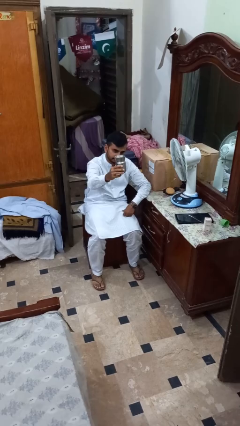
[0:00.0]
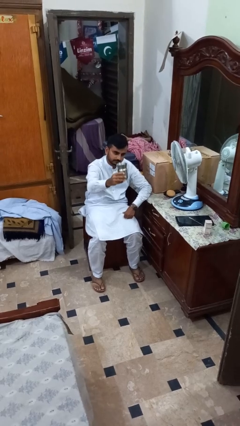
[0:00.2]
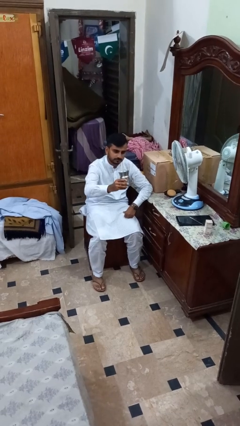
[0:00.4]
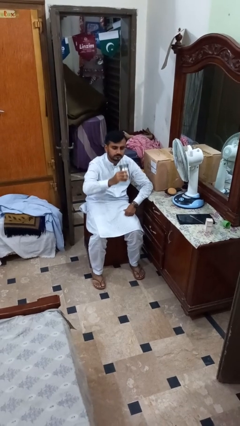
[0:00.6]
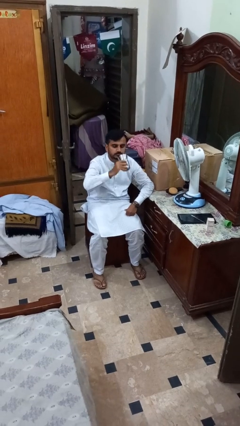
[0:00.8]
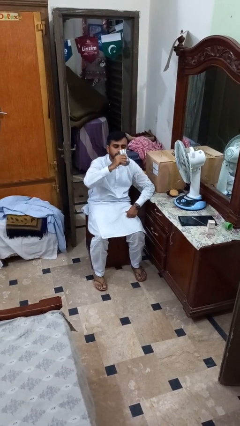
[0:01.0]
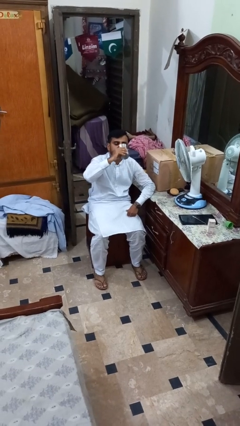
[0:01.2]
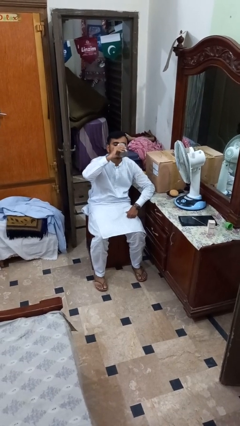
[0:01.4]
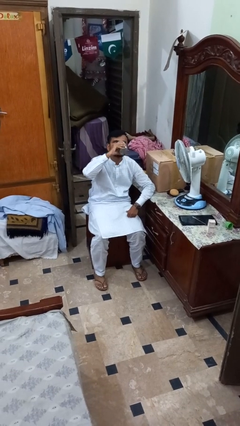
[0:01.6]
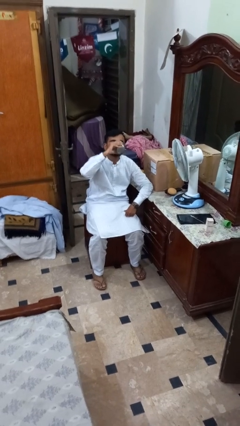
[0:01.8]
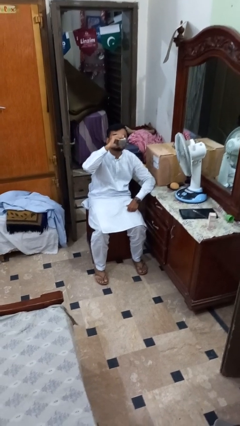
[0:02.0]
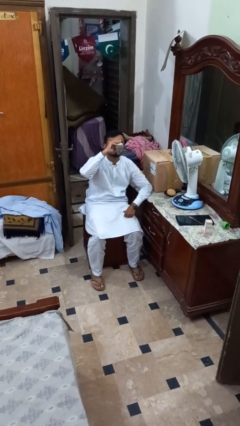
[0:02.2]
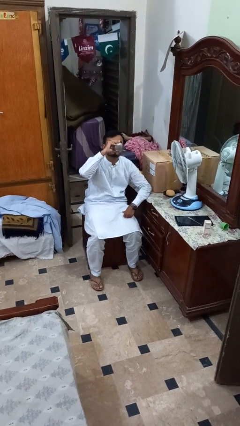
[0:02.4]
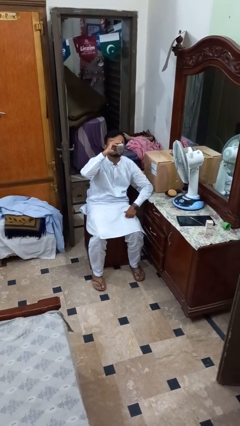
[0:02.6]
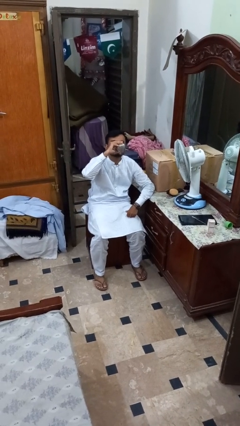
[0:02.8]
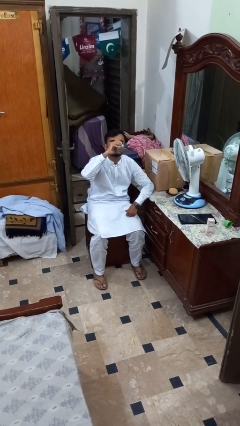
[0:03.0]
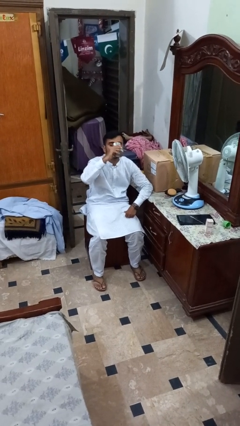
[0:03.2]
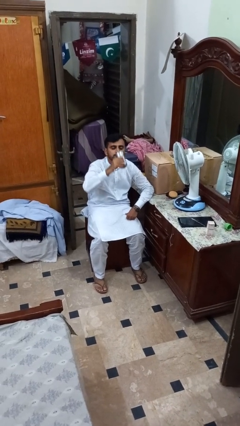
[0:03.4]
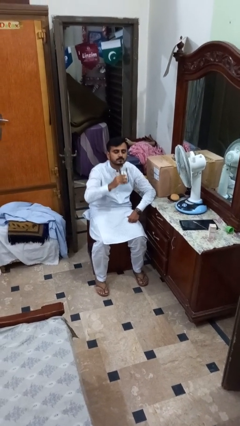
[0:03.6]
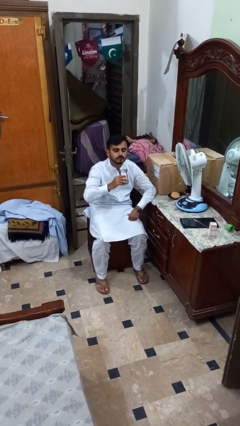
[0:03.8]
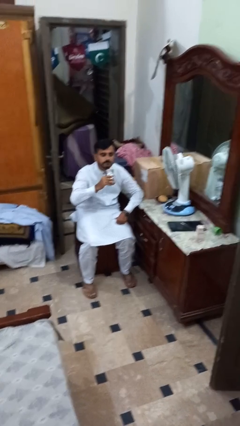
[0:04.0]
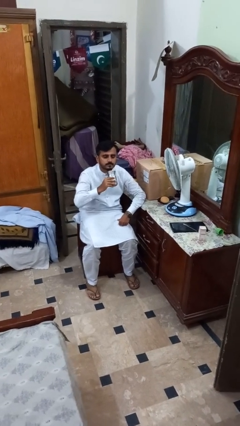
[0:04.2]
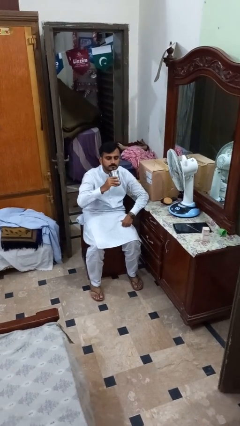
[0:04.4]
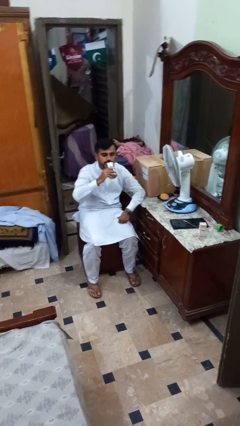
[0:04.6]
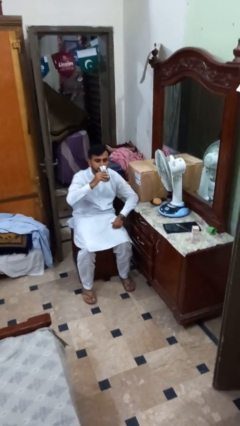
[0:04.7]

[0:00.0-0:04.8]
person drinks from shotglass

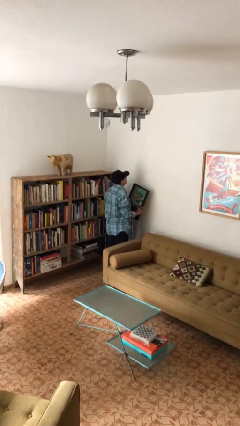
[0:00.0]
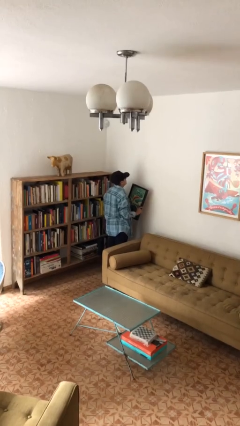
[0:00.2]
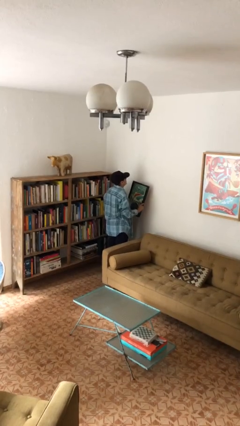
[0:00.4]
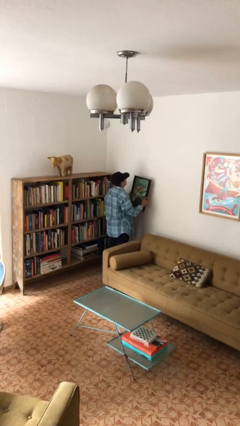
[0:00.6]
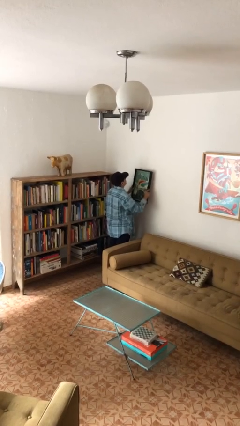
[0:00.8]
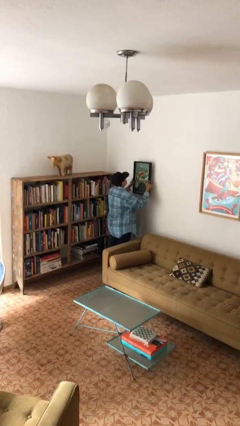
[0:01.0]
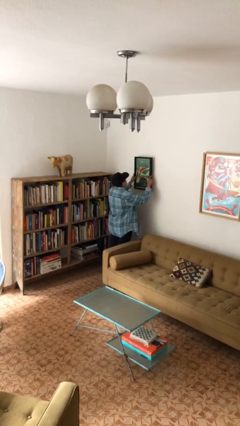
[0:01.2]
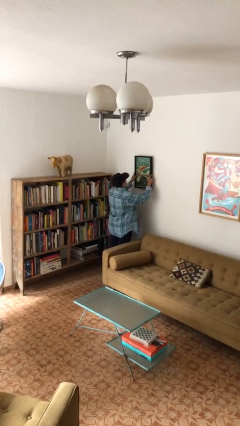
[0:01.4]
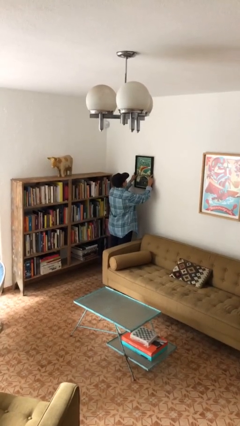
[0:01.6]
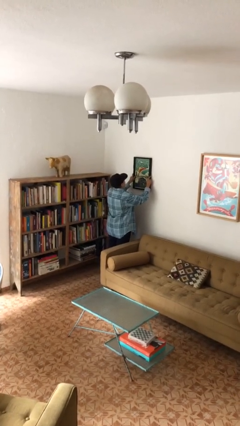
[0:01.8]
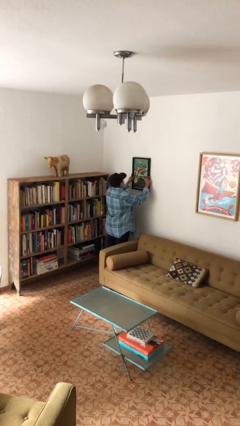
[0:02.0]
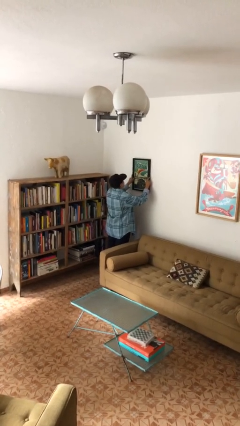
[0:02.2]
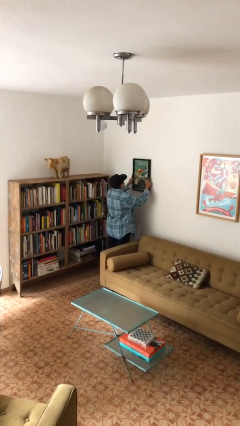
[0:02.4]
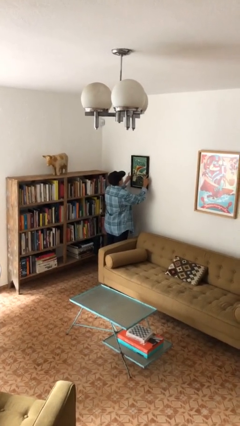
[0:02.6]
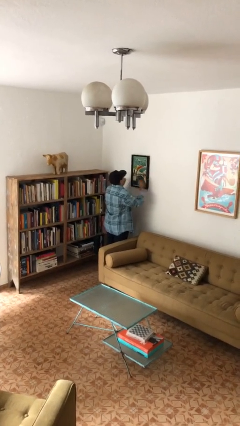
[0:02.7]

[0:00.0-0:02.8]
person puts up picture frame

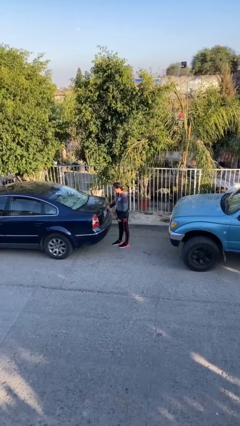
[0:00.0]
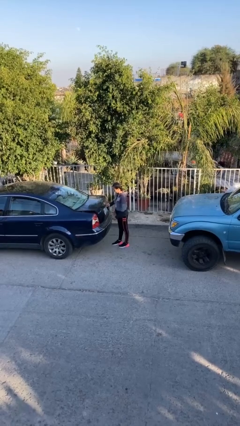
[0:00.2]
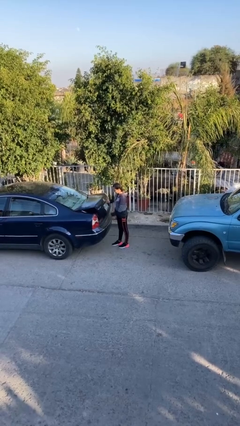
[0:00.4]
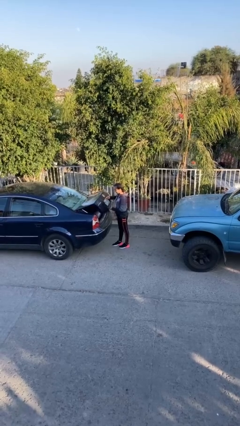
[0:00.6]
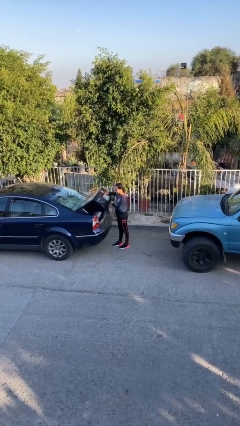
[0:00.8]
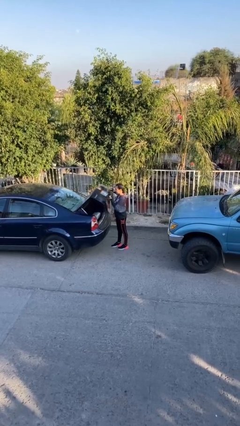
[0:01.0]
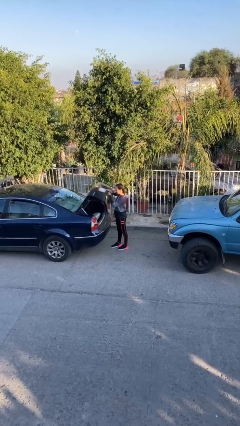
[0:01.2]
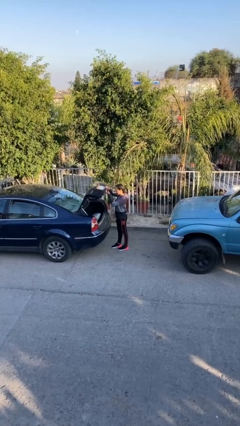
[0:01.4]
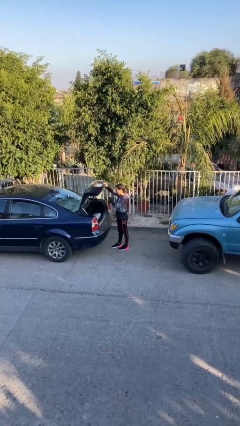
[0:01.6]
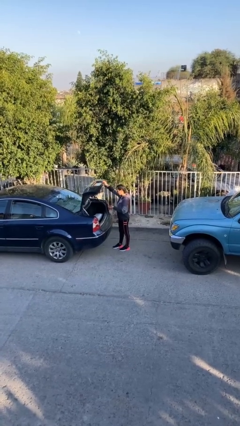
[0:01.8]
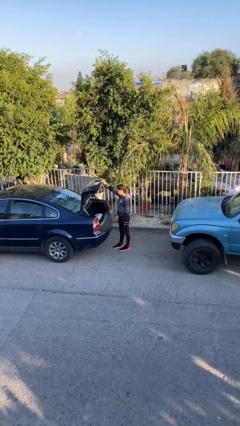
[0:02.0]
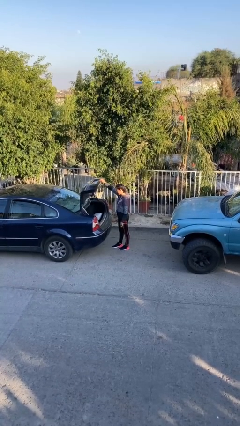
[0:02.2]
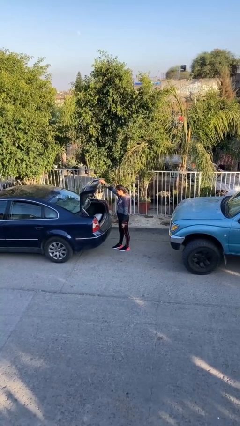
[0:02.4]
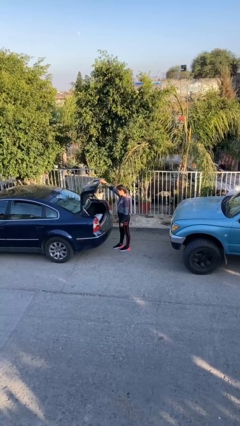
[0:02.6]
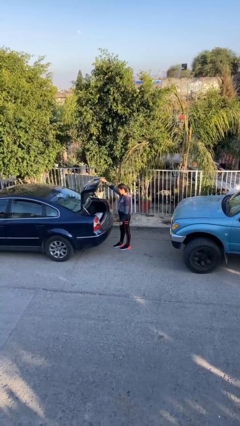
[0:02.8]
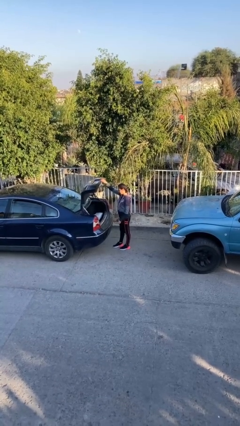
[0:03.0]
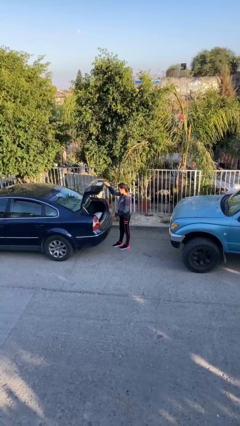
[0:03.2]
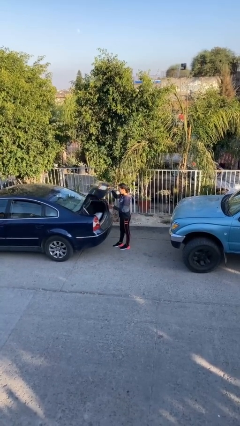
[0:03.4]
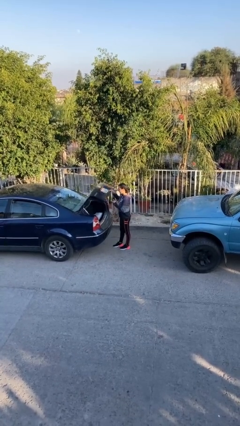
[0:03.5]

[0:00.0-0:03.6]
person opens car trunk

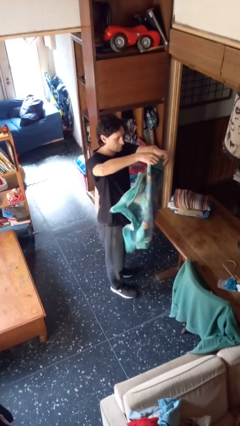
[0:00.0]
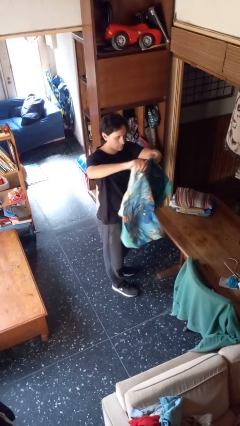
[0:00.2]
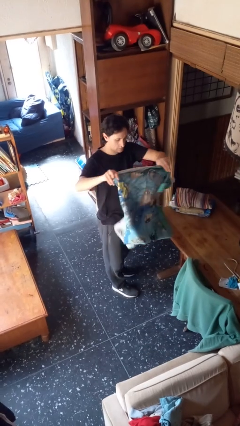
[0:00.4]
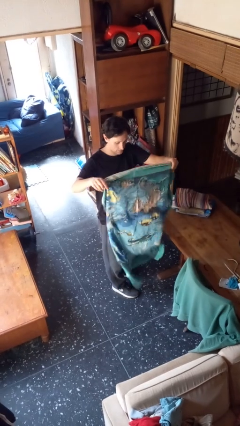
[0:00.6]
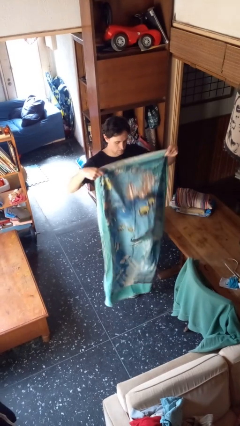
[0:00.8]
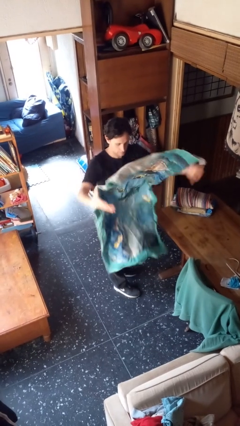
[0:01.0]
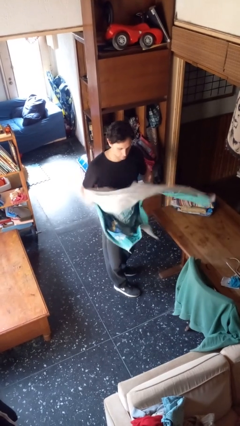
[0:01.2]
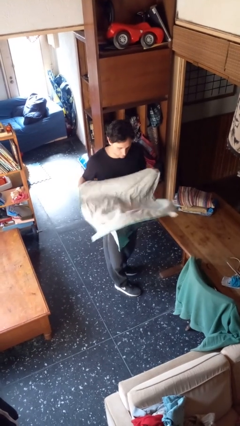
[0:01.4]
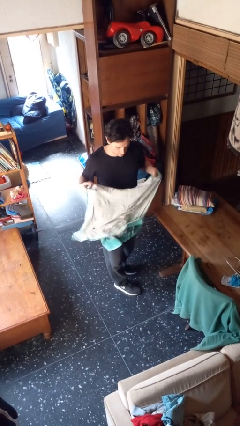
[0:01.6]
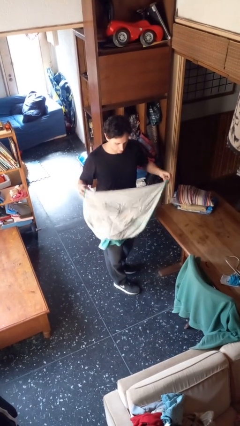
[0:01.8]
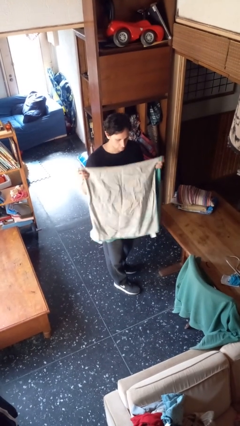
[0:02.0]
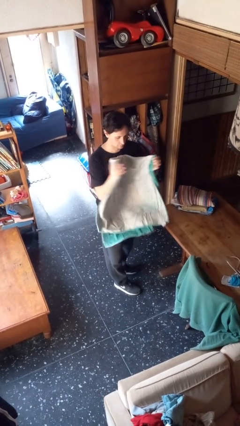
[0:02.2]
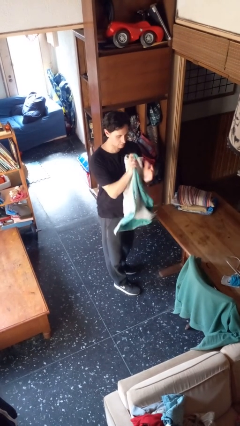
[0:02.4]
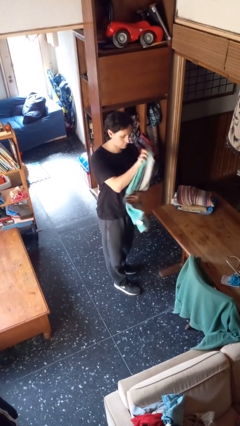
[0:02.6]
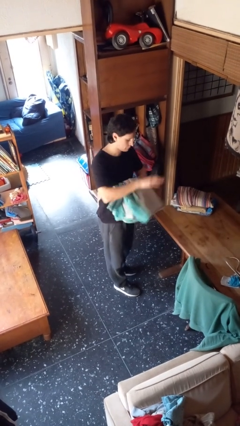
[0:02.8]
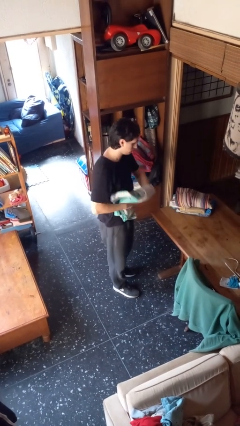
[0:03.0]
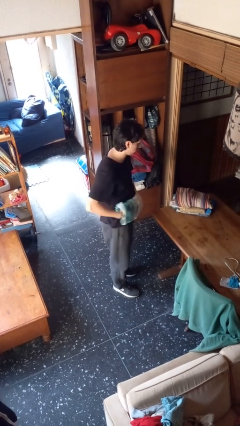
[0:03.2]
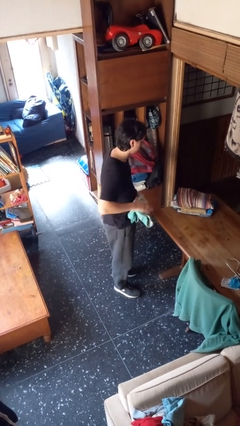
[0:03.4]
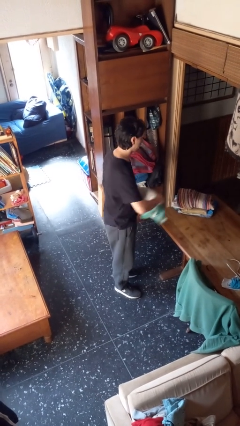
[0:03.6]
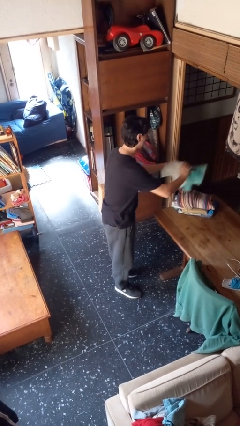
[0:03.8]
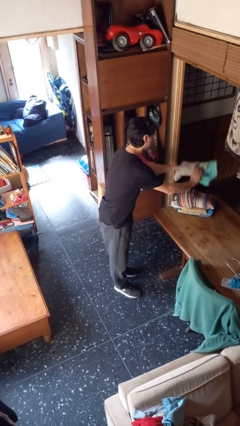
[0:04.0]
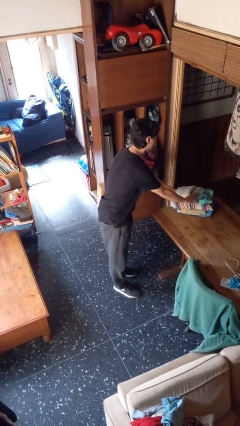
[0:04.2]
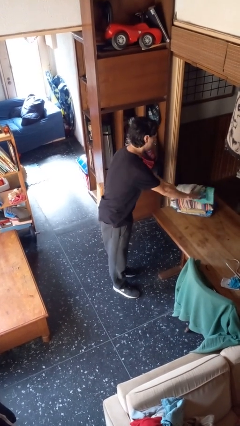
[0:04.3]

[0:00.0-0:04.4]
person folds towel

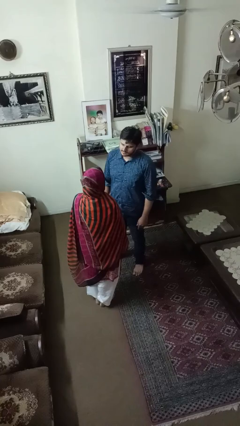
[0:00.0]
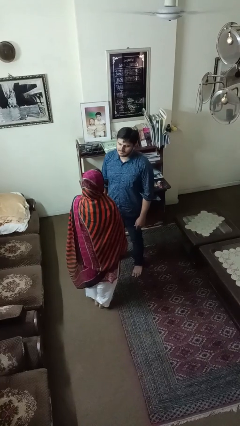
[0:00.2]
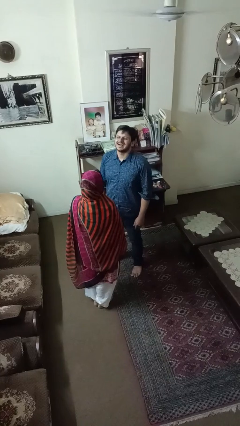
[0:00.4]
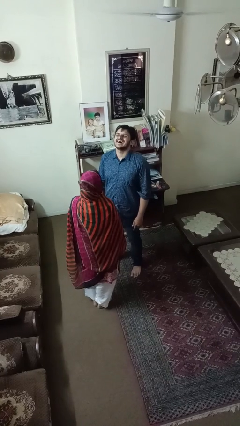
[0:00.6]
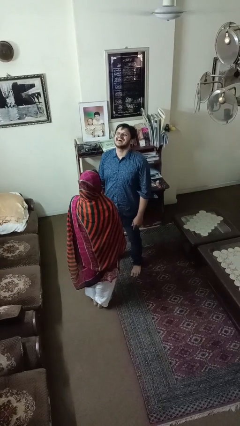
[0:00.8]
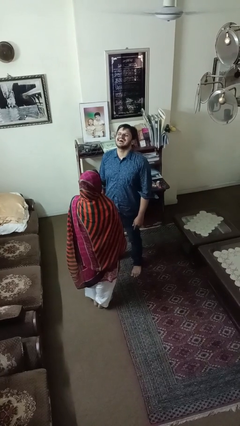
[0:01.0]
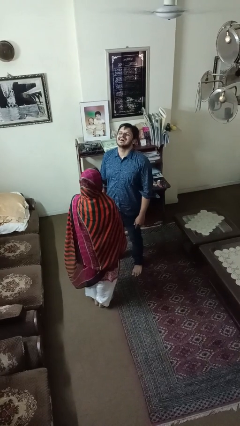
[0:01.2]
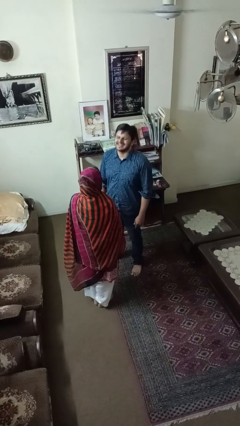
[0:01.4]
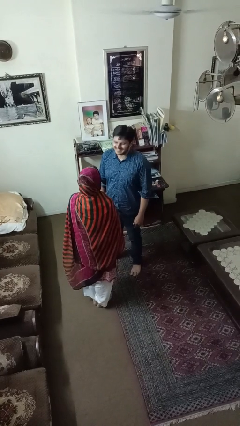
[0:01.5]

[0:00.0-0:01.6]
person laughs with person

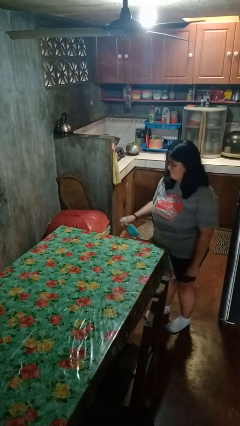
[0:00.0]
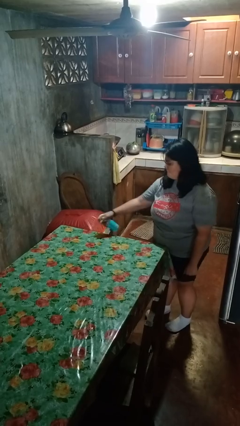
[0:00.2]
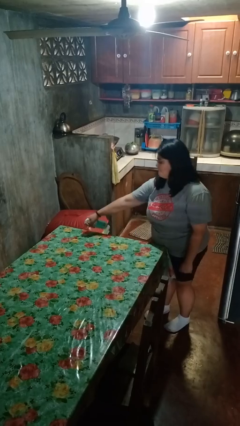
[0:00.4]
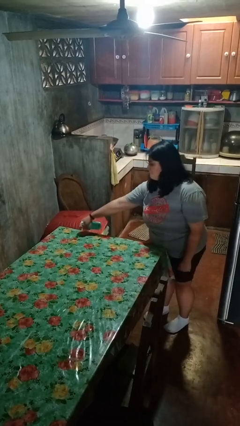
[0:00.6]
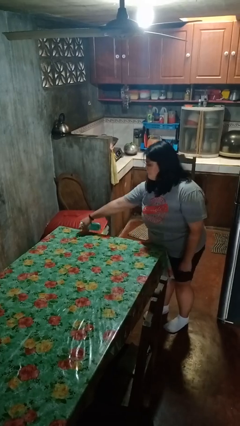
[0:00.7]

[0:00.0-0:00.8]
person sprays from bottle
